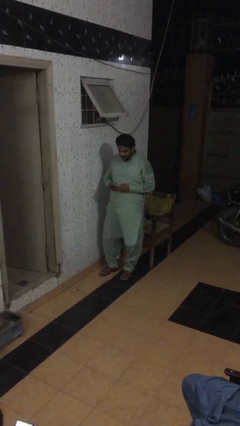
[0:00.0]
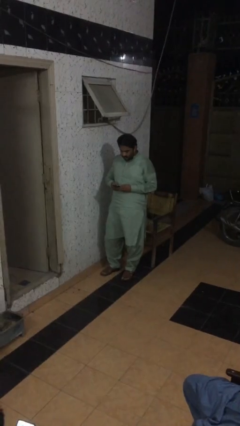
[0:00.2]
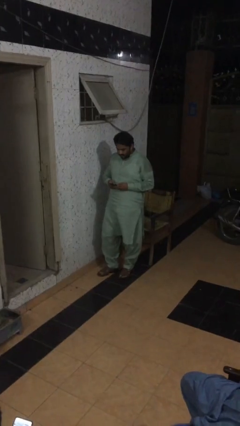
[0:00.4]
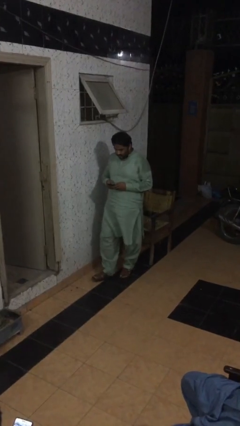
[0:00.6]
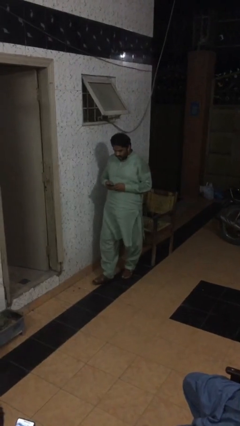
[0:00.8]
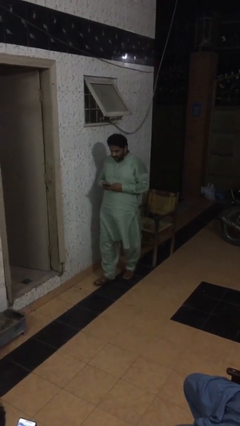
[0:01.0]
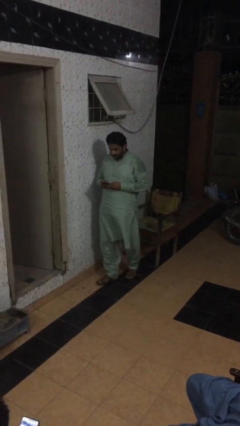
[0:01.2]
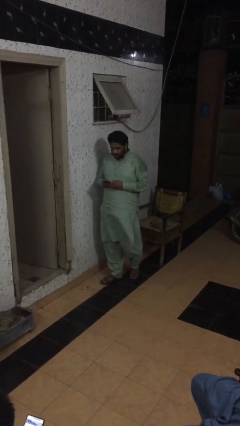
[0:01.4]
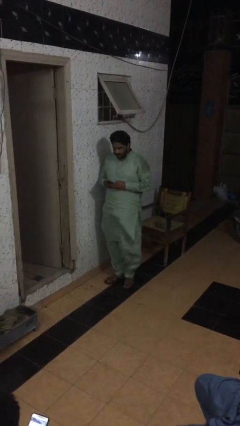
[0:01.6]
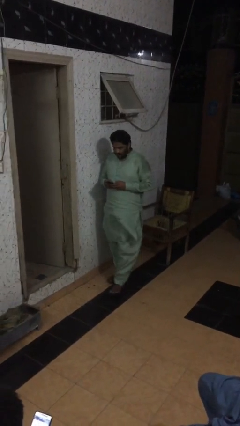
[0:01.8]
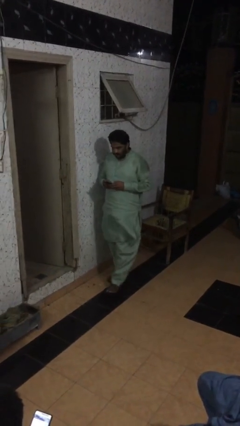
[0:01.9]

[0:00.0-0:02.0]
person texts on phone

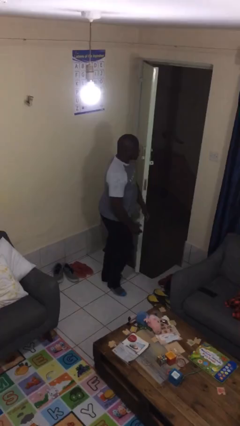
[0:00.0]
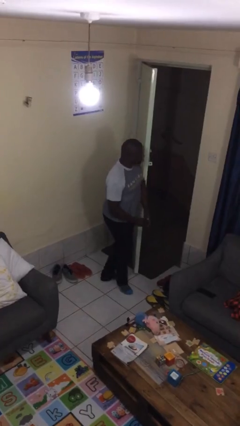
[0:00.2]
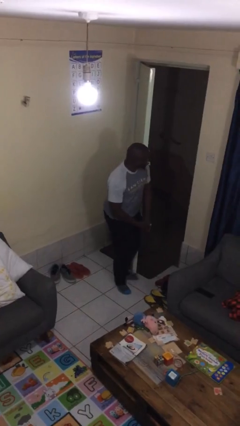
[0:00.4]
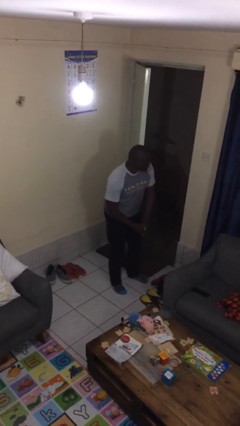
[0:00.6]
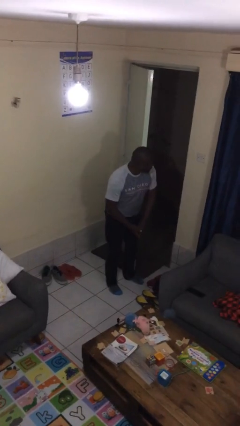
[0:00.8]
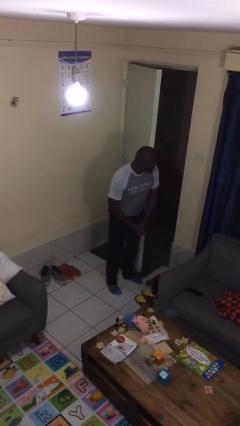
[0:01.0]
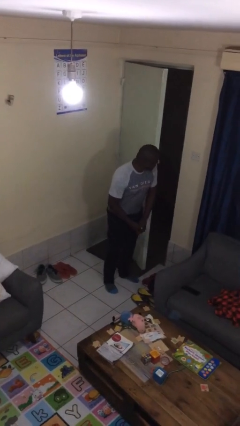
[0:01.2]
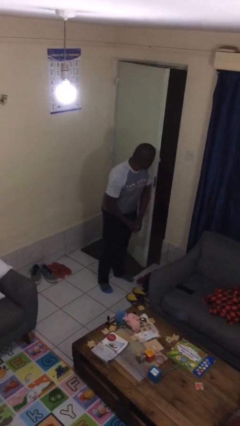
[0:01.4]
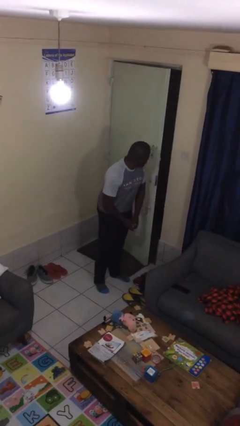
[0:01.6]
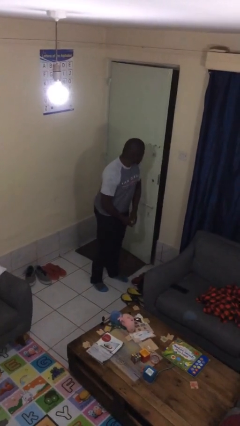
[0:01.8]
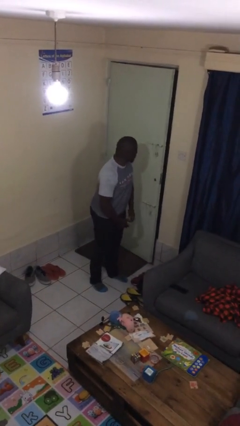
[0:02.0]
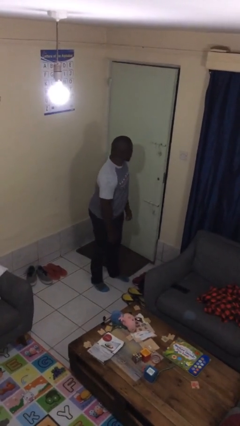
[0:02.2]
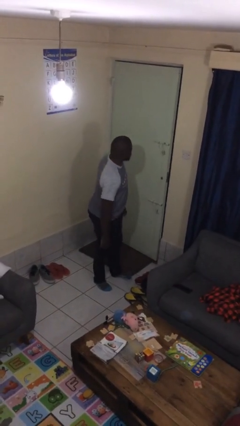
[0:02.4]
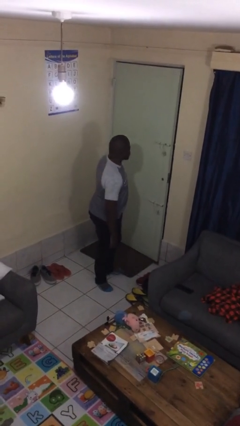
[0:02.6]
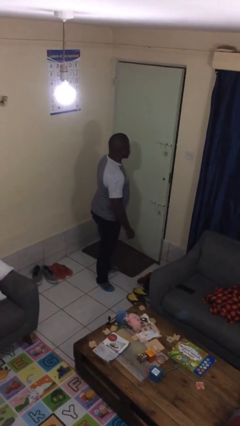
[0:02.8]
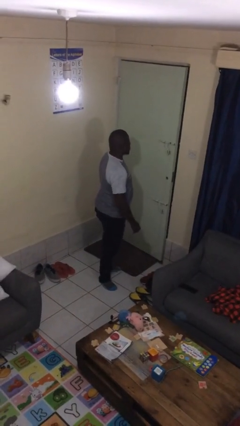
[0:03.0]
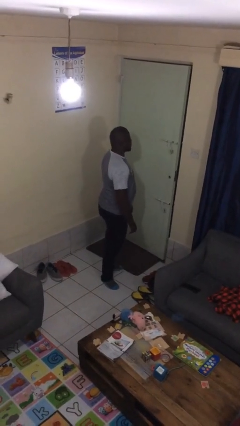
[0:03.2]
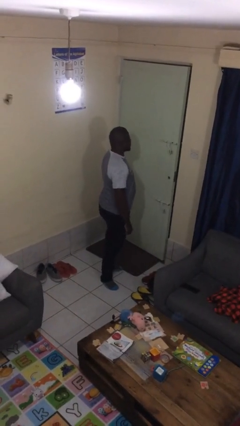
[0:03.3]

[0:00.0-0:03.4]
person closes door with hip

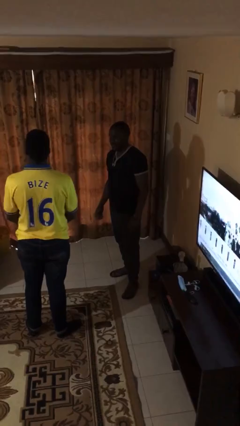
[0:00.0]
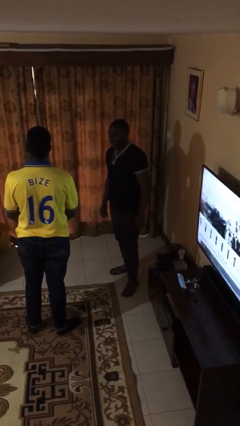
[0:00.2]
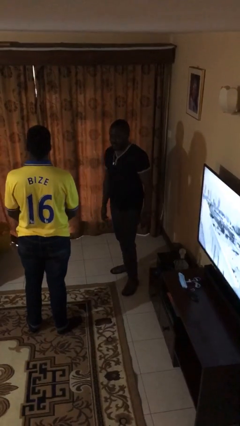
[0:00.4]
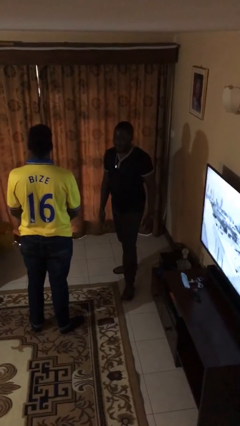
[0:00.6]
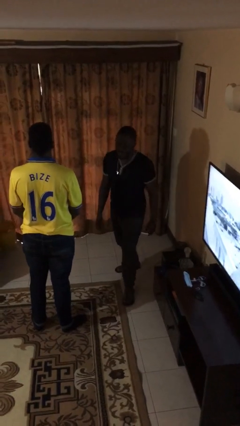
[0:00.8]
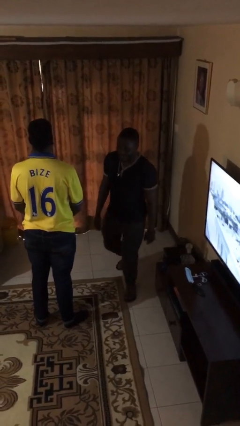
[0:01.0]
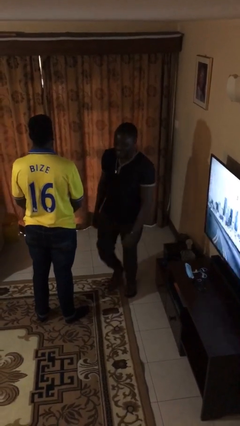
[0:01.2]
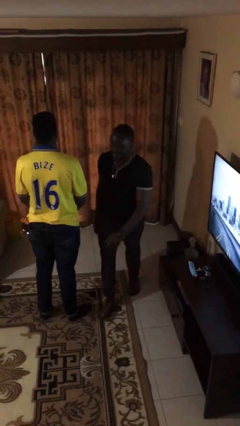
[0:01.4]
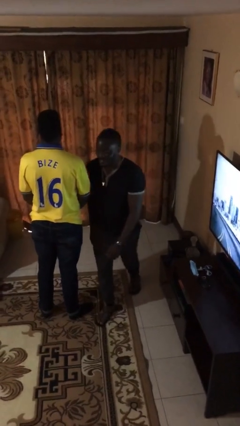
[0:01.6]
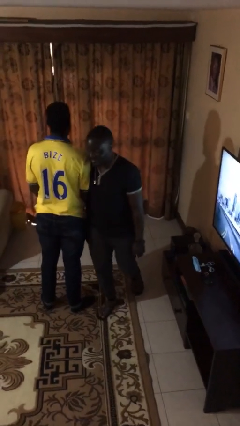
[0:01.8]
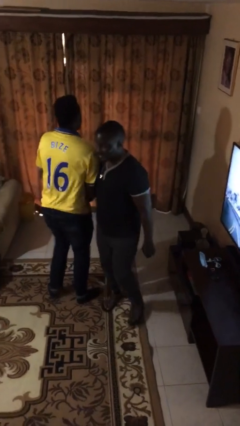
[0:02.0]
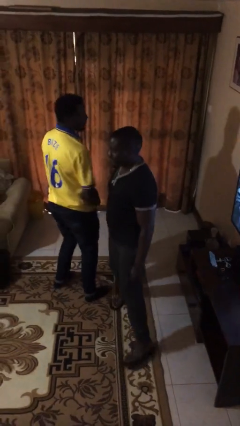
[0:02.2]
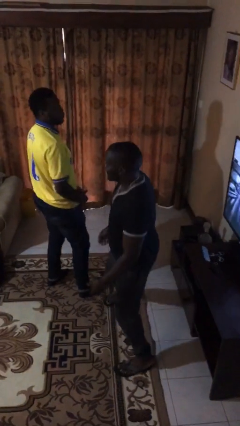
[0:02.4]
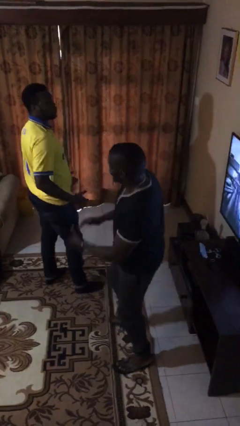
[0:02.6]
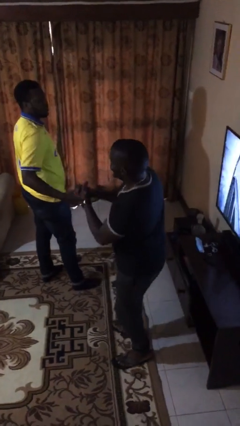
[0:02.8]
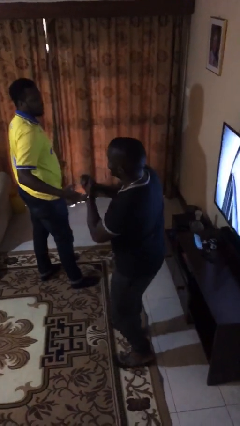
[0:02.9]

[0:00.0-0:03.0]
person bumps into person

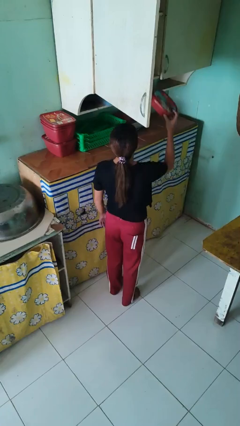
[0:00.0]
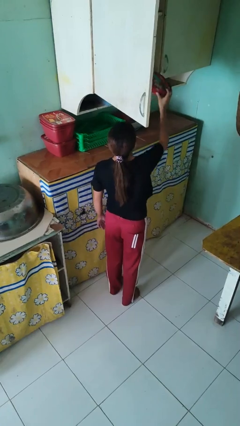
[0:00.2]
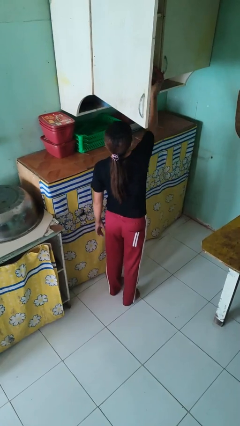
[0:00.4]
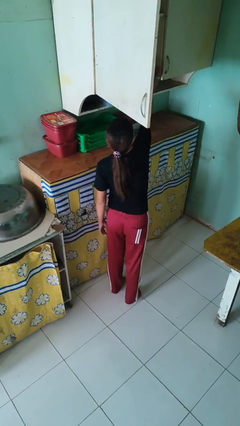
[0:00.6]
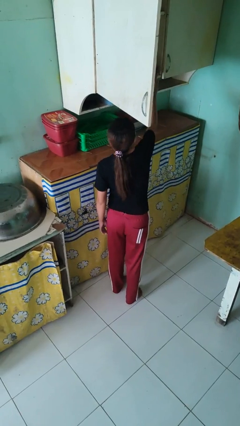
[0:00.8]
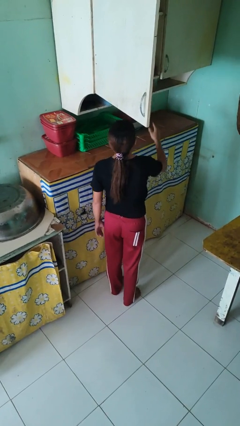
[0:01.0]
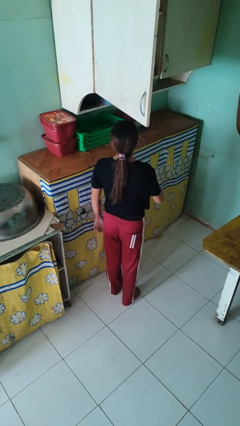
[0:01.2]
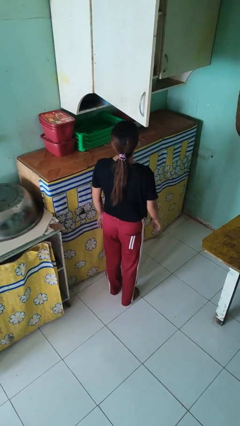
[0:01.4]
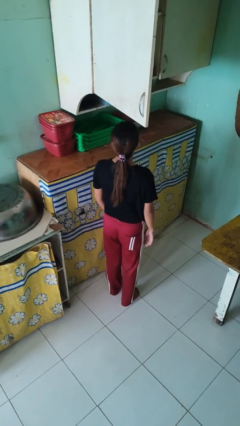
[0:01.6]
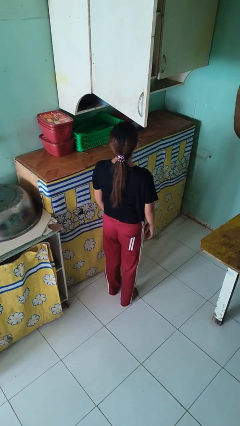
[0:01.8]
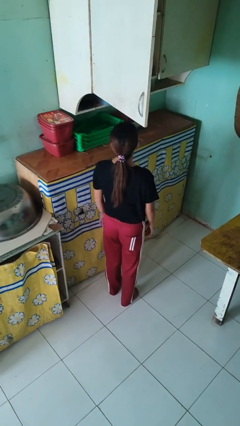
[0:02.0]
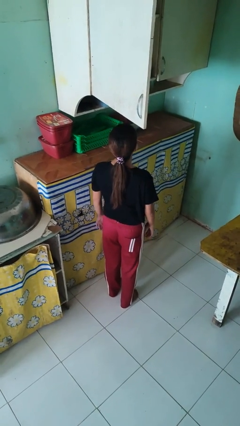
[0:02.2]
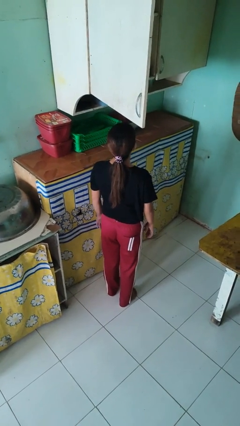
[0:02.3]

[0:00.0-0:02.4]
person puts object in cabinet

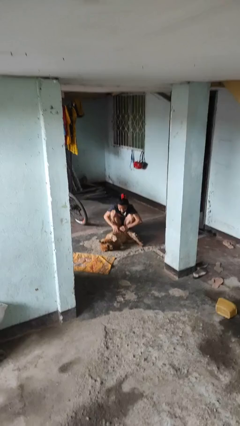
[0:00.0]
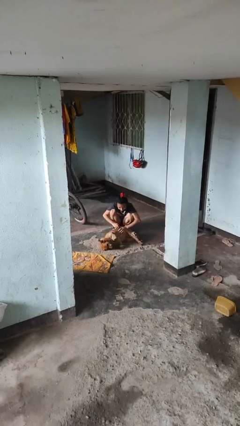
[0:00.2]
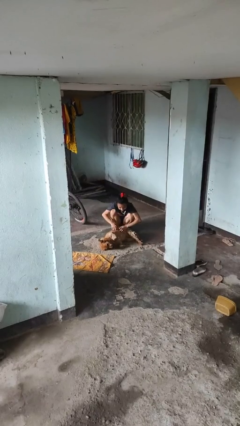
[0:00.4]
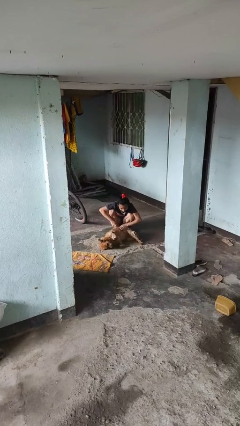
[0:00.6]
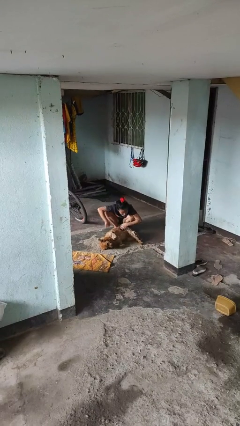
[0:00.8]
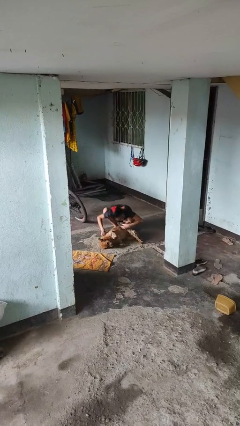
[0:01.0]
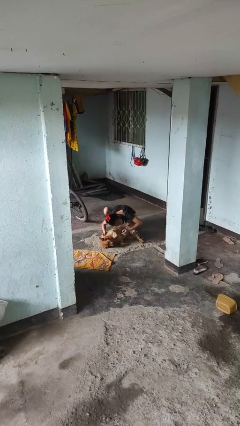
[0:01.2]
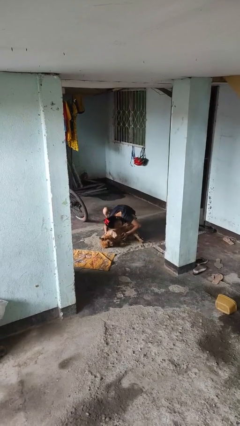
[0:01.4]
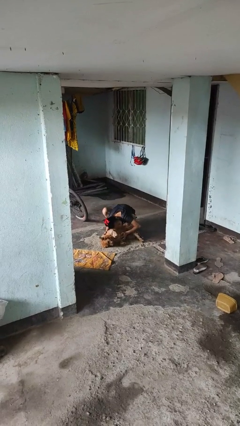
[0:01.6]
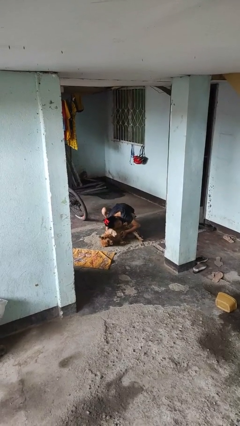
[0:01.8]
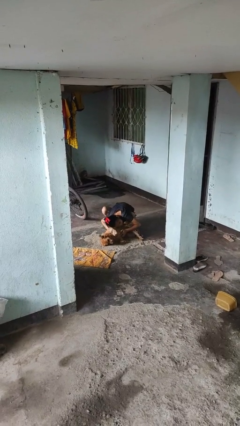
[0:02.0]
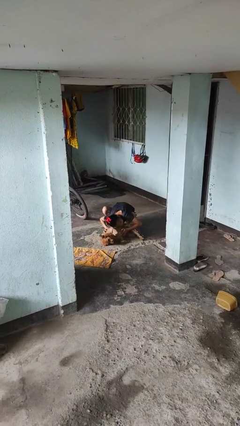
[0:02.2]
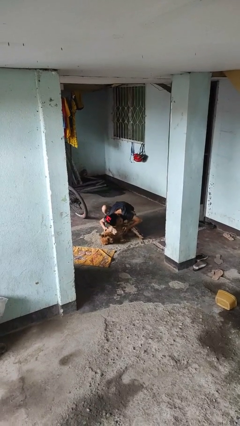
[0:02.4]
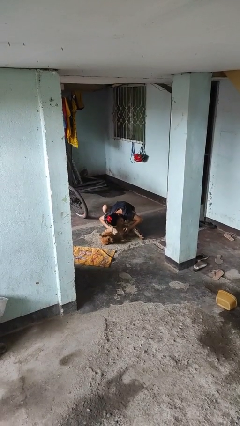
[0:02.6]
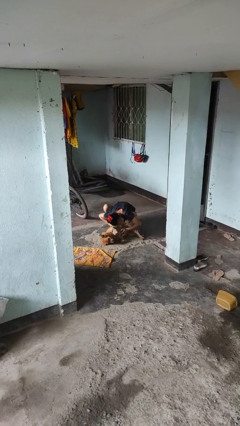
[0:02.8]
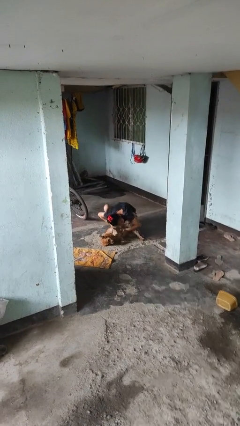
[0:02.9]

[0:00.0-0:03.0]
person hugs dog

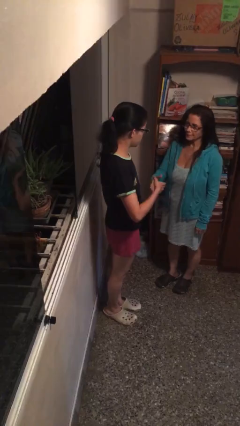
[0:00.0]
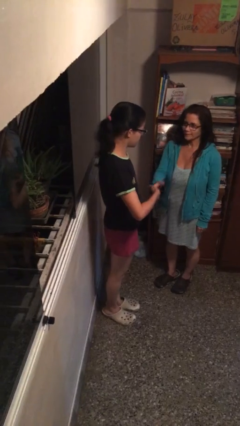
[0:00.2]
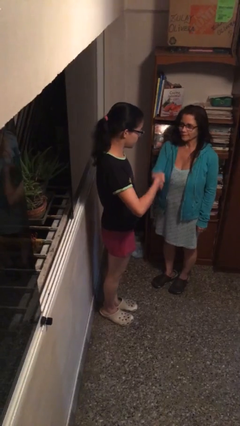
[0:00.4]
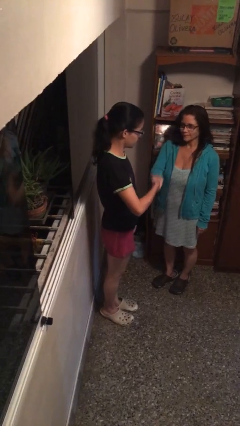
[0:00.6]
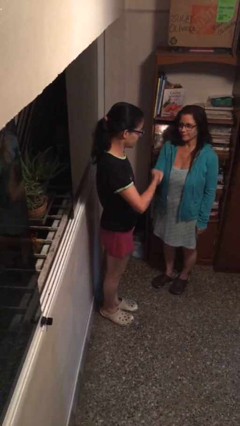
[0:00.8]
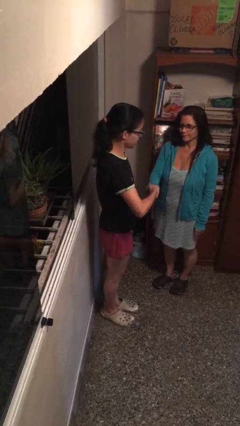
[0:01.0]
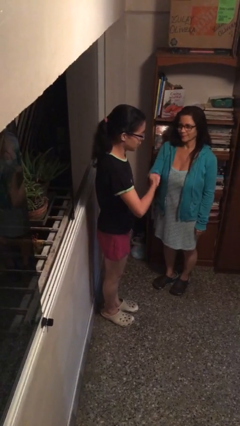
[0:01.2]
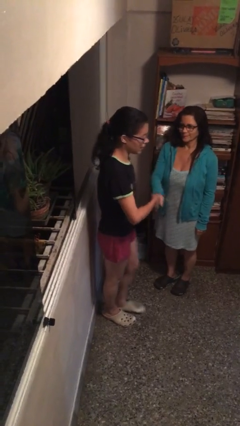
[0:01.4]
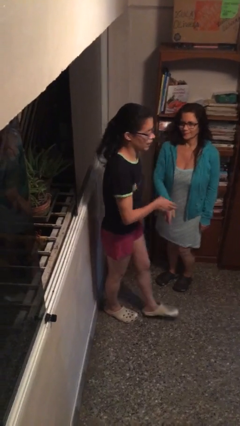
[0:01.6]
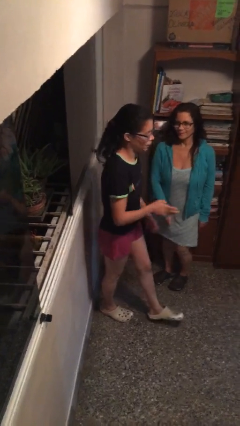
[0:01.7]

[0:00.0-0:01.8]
person shakes hand

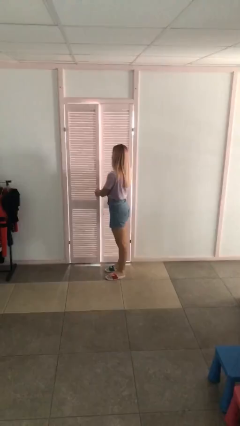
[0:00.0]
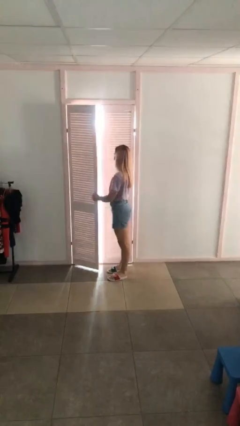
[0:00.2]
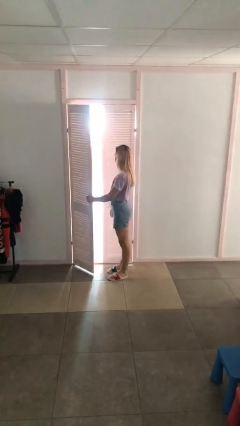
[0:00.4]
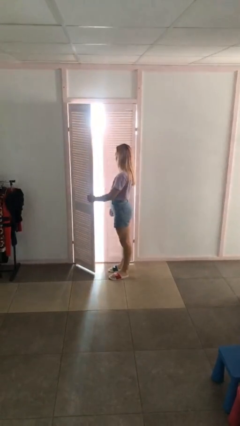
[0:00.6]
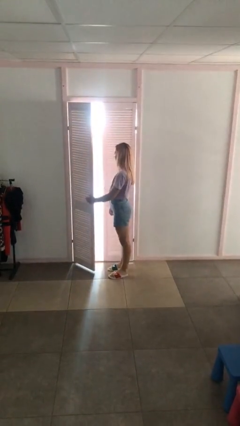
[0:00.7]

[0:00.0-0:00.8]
person opens facility door

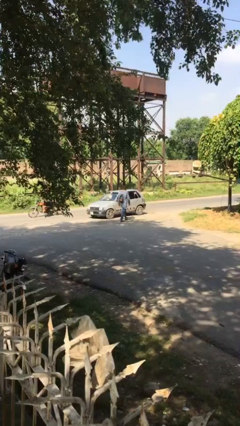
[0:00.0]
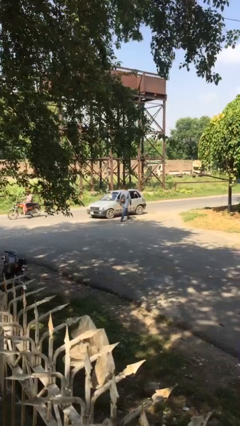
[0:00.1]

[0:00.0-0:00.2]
car picks up person

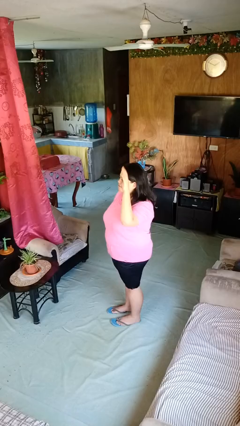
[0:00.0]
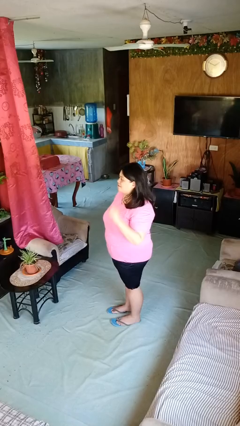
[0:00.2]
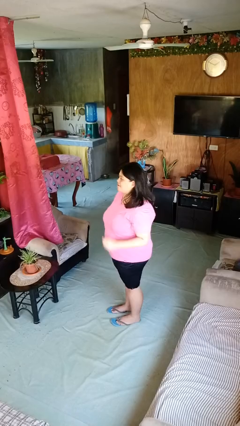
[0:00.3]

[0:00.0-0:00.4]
person gestures lower hand
